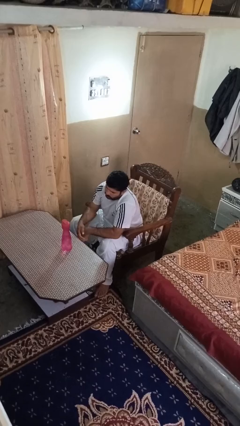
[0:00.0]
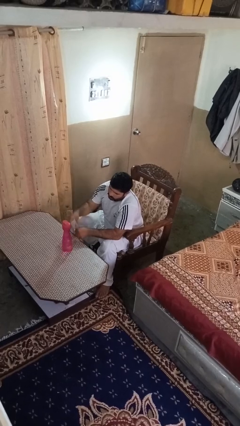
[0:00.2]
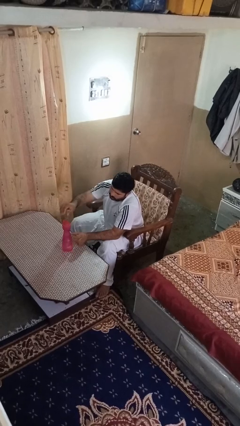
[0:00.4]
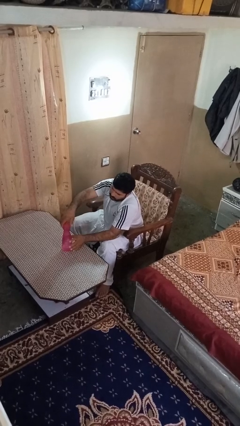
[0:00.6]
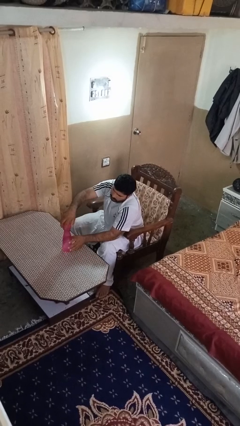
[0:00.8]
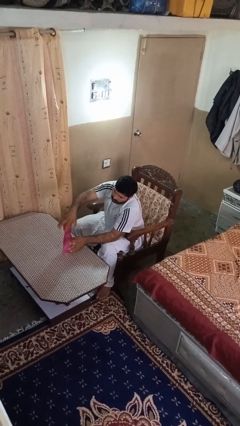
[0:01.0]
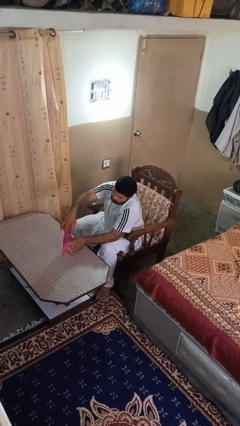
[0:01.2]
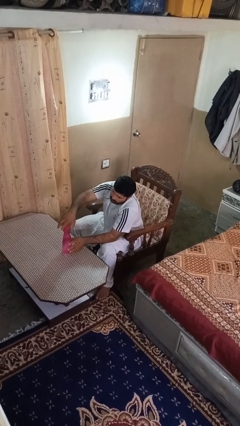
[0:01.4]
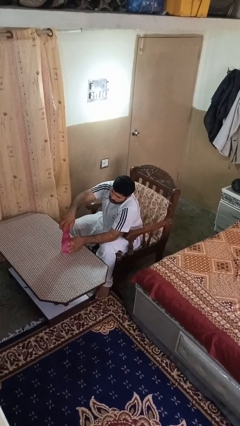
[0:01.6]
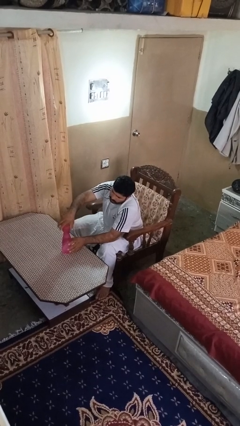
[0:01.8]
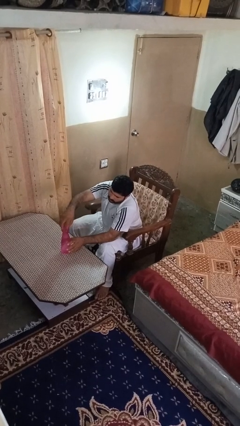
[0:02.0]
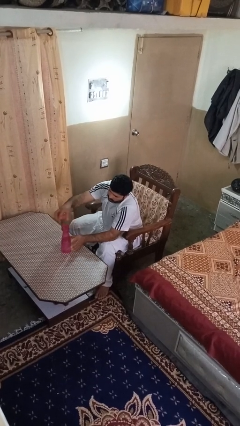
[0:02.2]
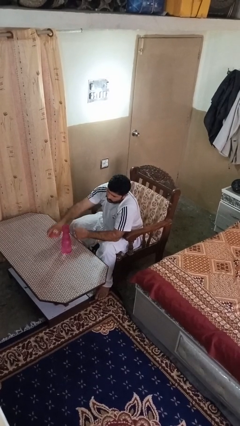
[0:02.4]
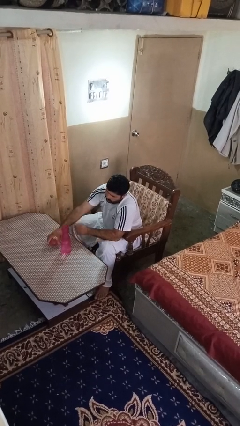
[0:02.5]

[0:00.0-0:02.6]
person unscrews lid from bottle

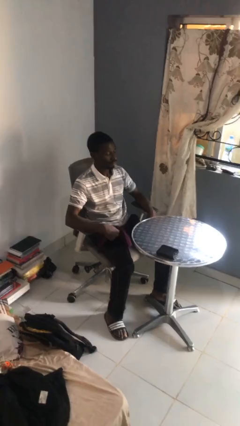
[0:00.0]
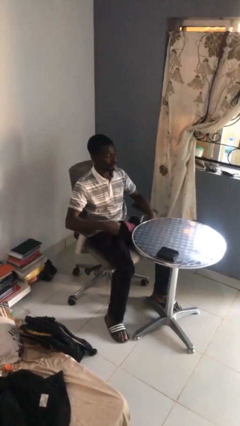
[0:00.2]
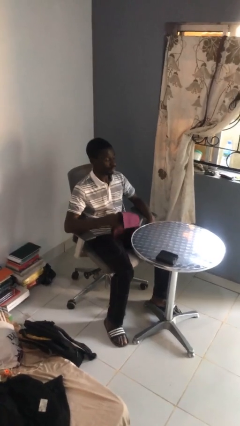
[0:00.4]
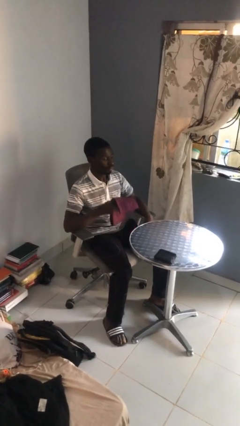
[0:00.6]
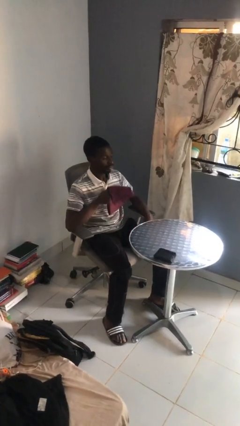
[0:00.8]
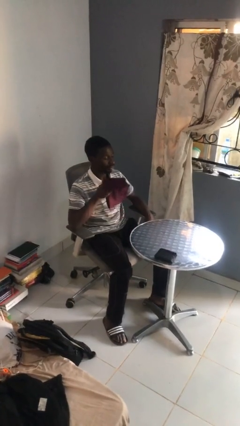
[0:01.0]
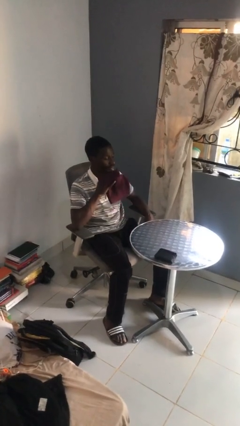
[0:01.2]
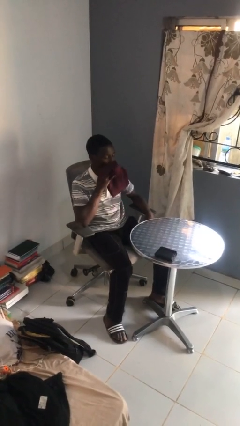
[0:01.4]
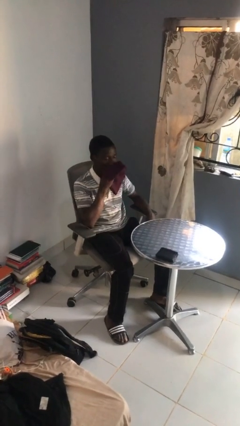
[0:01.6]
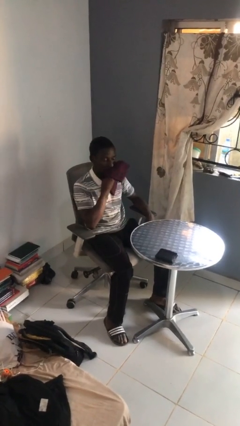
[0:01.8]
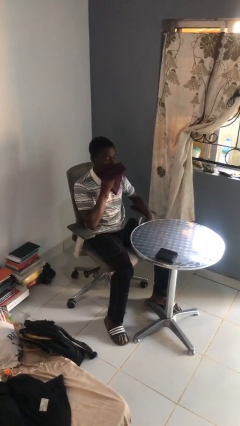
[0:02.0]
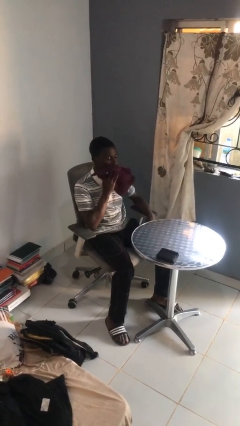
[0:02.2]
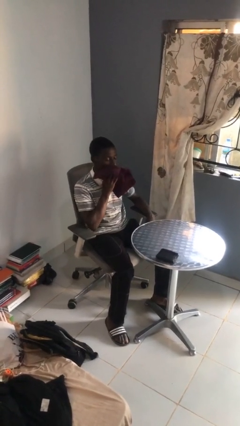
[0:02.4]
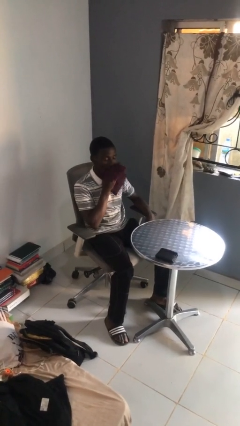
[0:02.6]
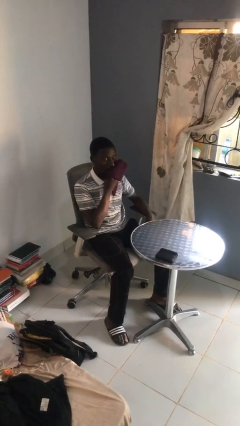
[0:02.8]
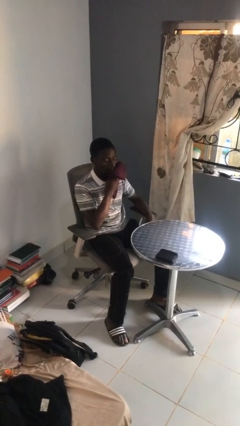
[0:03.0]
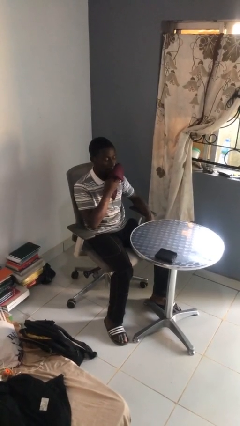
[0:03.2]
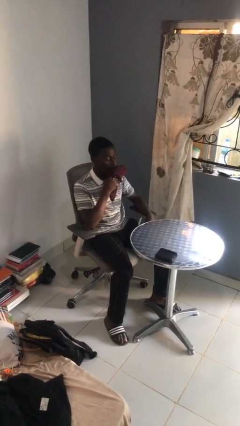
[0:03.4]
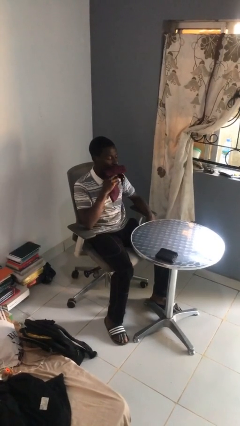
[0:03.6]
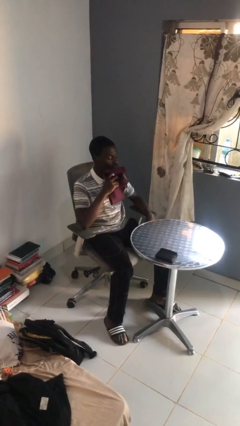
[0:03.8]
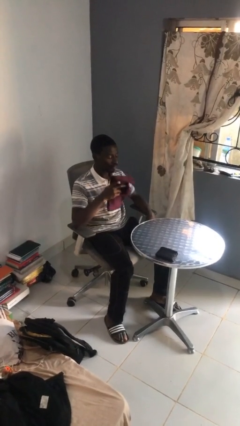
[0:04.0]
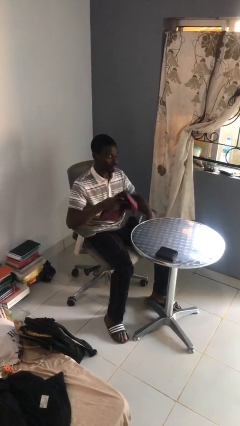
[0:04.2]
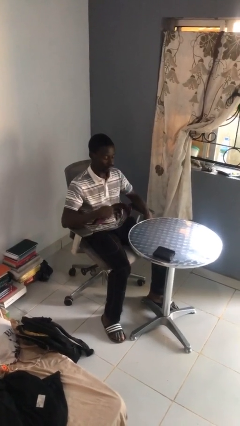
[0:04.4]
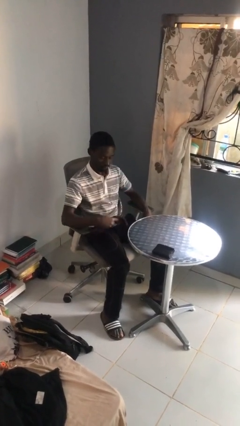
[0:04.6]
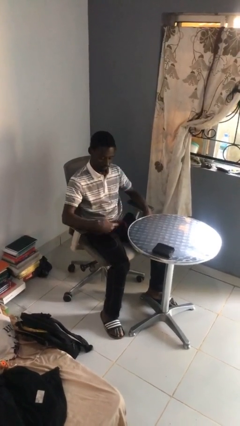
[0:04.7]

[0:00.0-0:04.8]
person wipes mouth with napkin

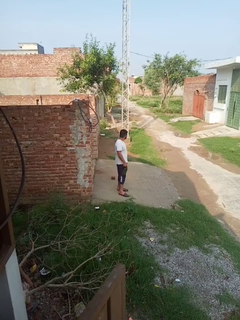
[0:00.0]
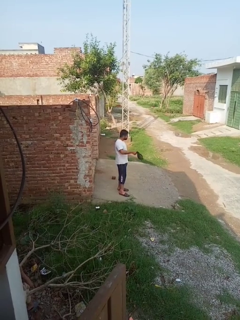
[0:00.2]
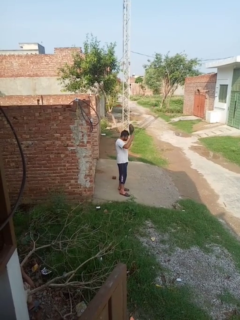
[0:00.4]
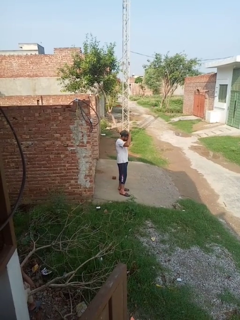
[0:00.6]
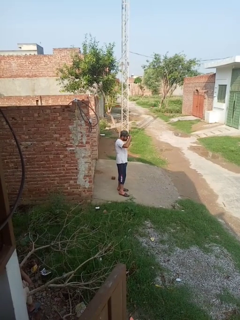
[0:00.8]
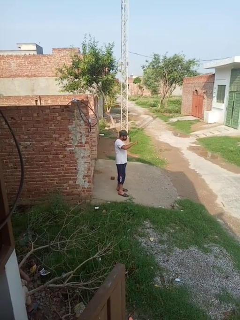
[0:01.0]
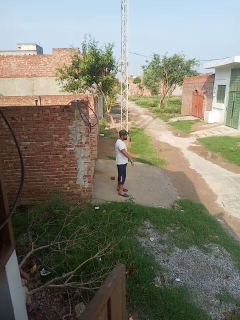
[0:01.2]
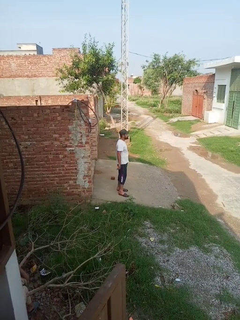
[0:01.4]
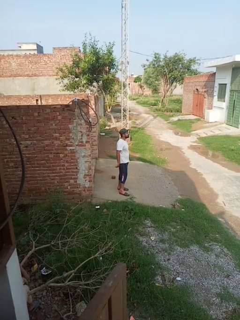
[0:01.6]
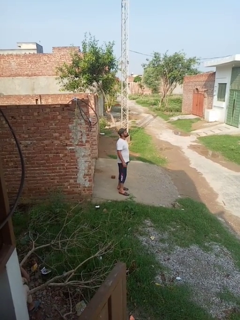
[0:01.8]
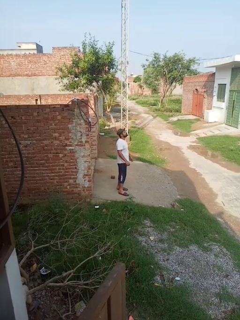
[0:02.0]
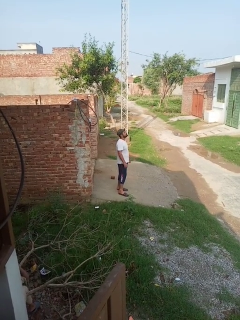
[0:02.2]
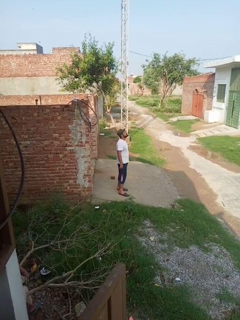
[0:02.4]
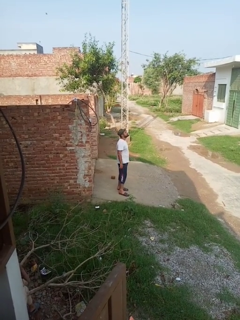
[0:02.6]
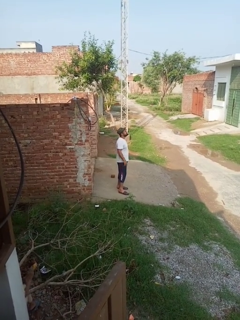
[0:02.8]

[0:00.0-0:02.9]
person puts on hat

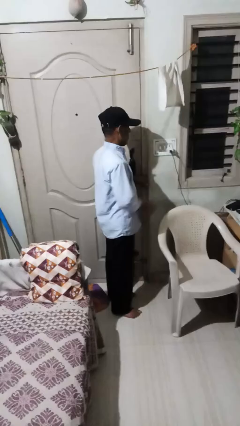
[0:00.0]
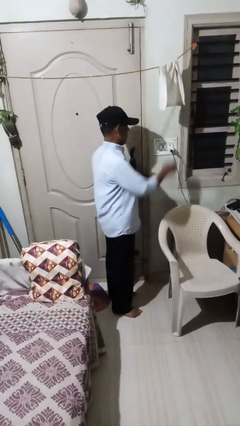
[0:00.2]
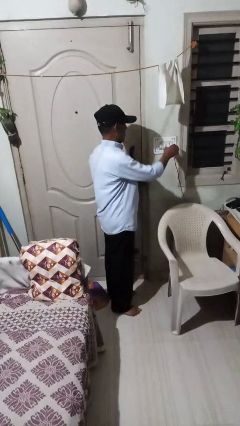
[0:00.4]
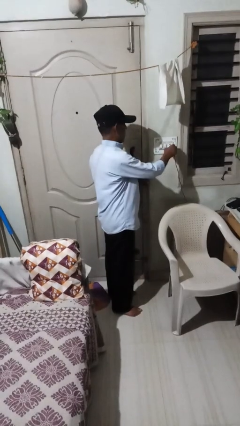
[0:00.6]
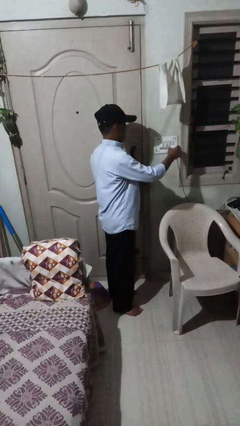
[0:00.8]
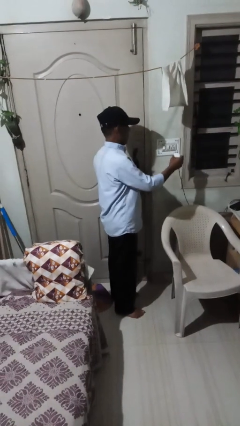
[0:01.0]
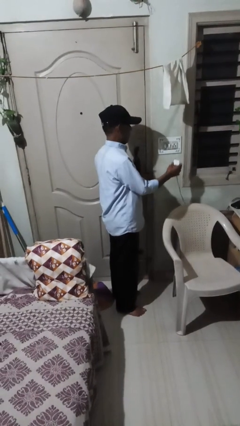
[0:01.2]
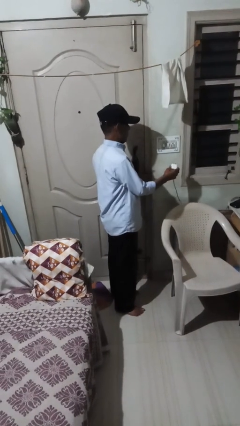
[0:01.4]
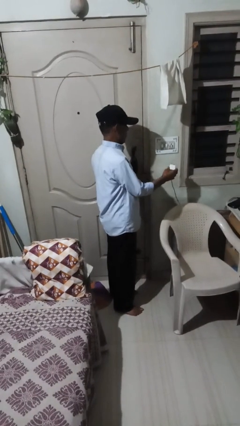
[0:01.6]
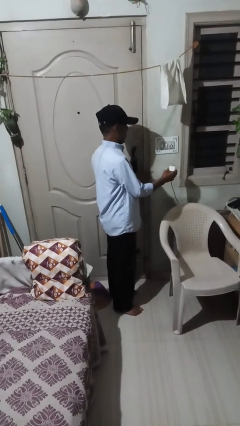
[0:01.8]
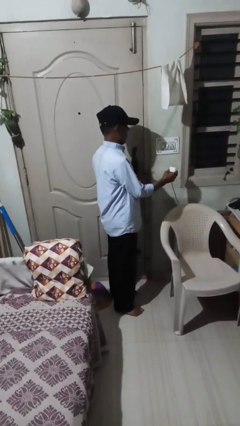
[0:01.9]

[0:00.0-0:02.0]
person unplugs from electrical socket

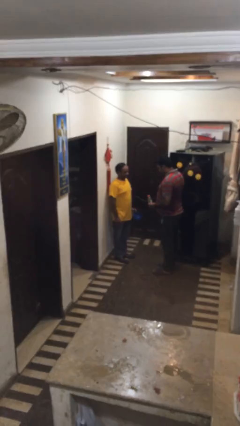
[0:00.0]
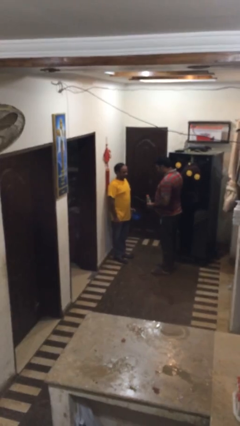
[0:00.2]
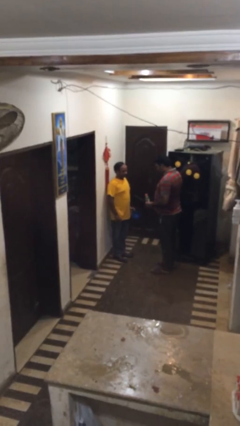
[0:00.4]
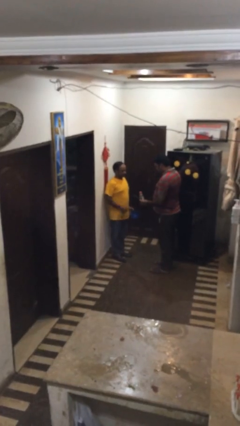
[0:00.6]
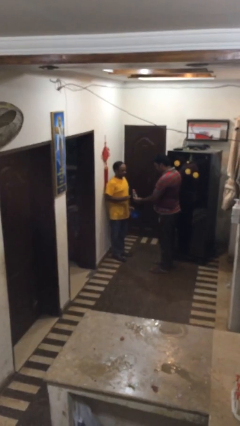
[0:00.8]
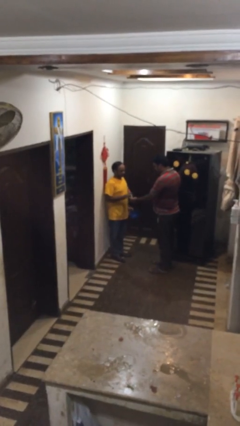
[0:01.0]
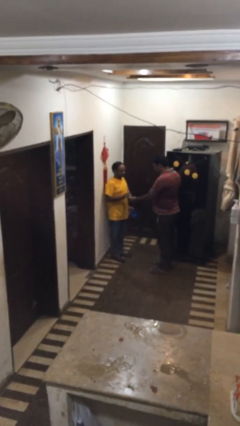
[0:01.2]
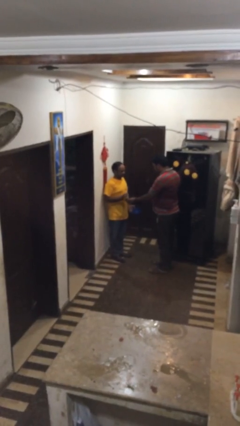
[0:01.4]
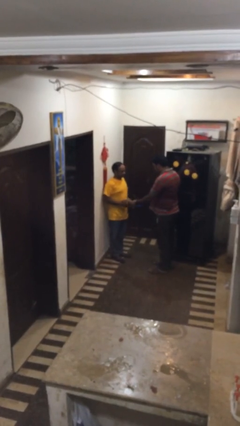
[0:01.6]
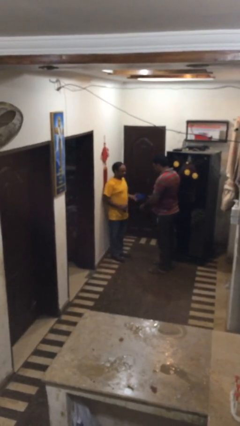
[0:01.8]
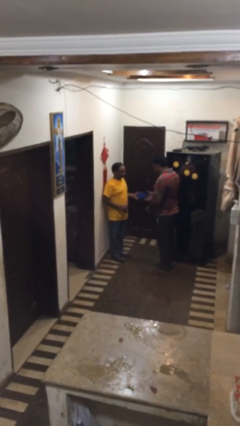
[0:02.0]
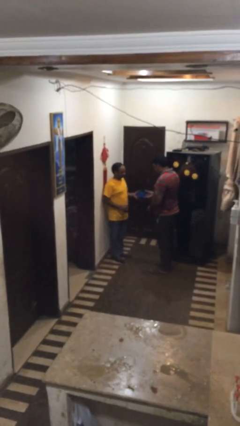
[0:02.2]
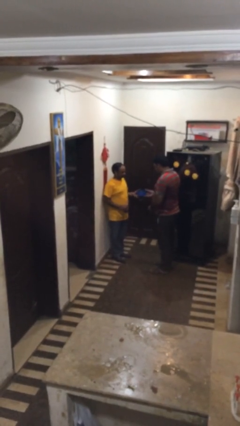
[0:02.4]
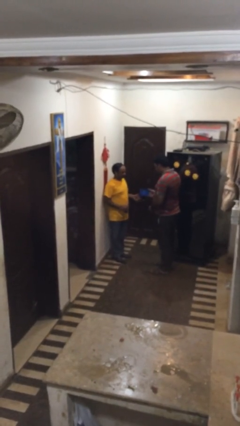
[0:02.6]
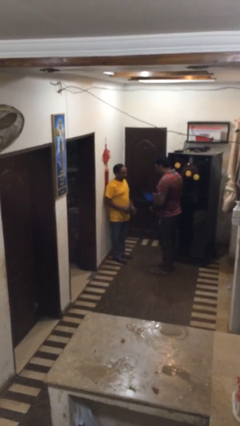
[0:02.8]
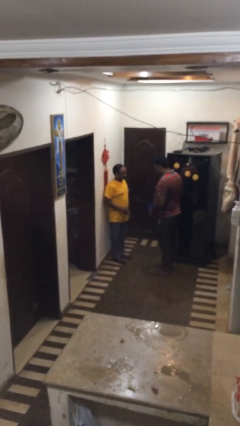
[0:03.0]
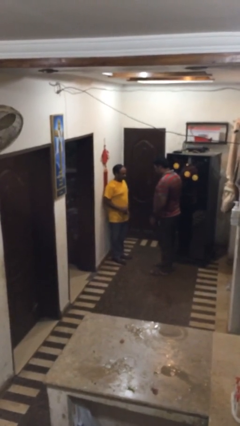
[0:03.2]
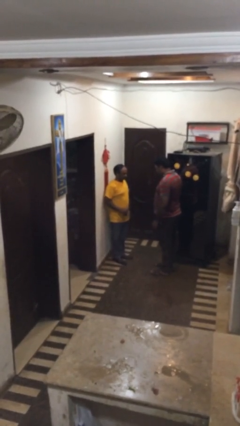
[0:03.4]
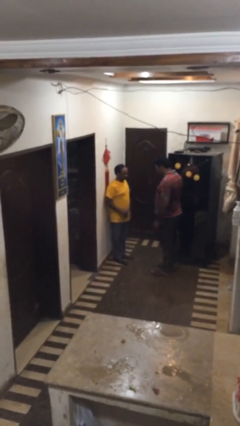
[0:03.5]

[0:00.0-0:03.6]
person transfers object to person

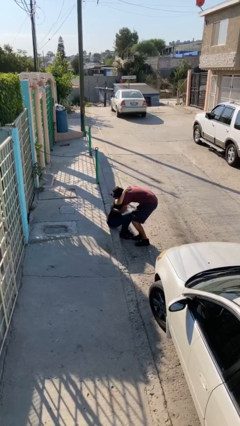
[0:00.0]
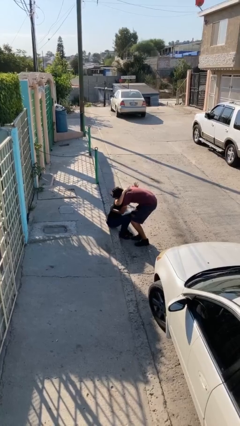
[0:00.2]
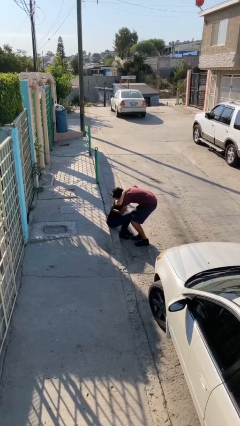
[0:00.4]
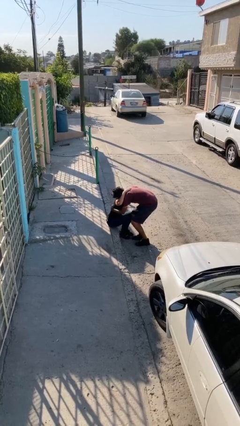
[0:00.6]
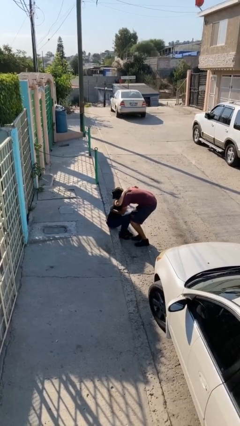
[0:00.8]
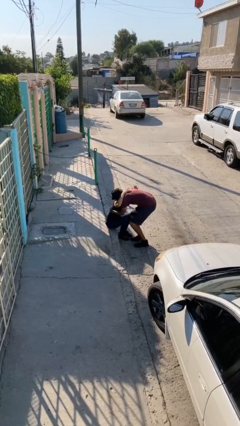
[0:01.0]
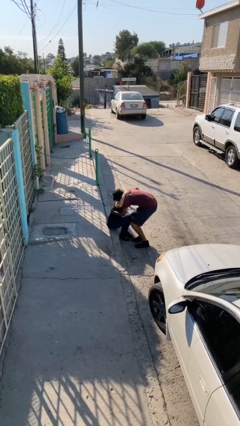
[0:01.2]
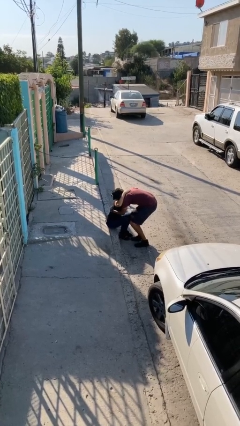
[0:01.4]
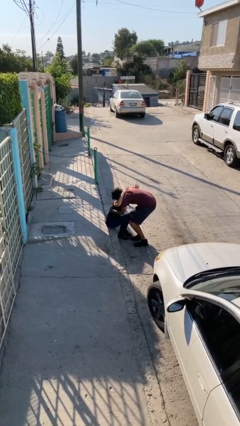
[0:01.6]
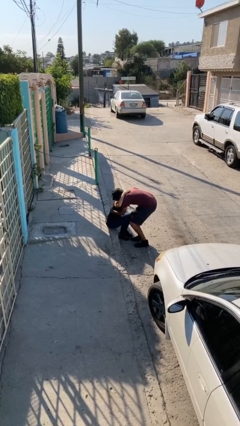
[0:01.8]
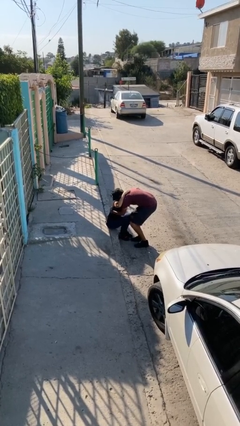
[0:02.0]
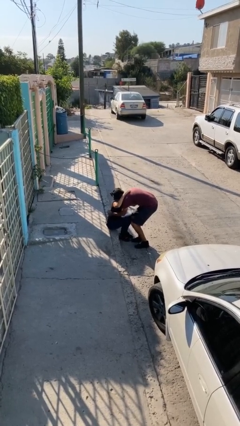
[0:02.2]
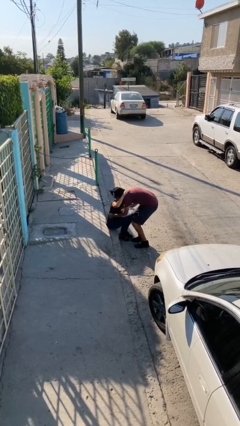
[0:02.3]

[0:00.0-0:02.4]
person embraces person
